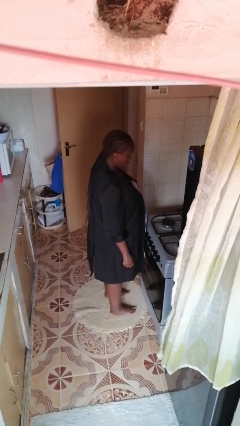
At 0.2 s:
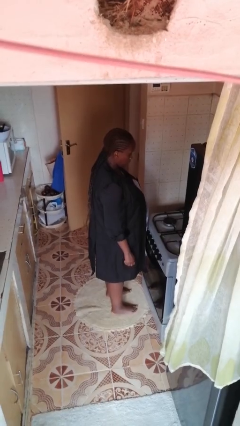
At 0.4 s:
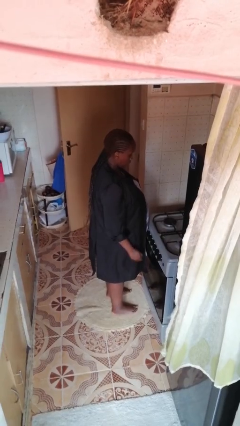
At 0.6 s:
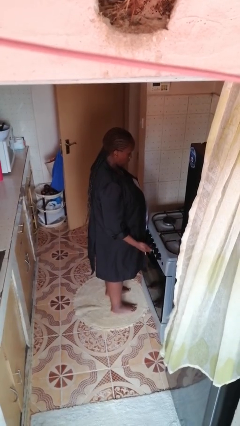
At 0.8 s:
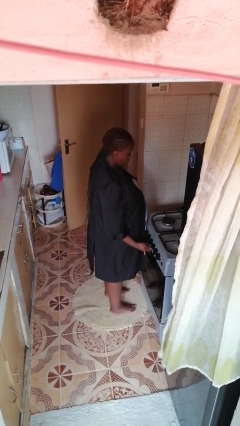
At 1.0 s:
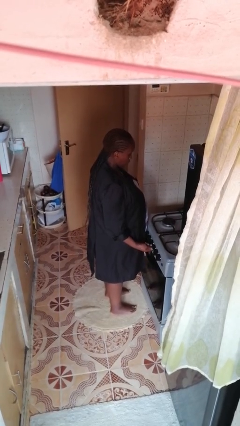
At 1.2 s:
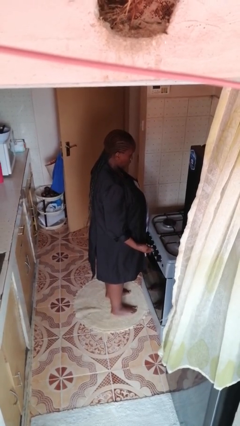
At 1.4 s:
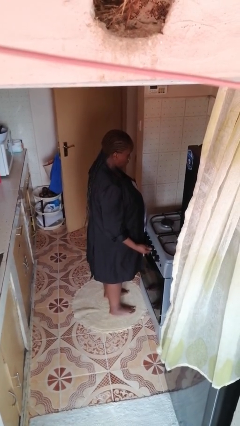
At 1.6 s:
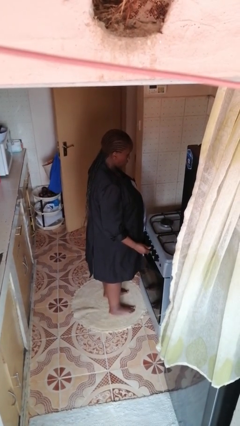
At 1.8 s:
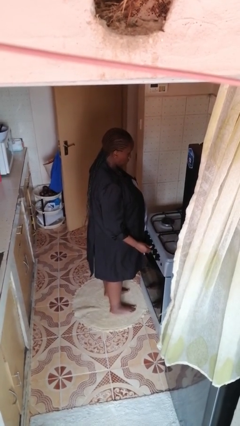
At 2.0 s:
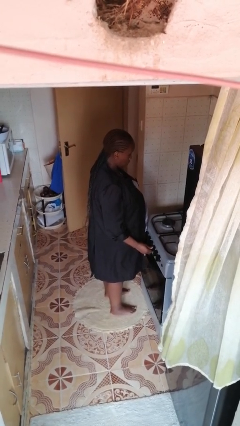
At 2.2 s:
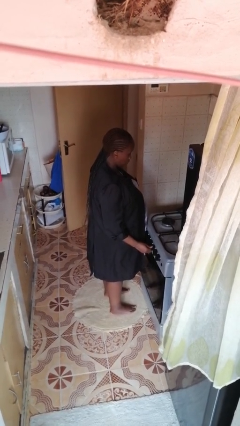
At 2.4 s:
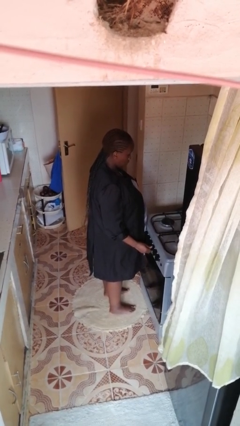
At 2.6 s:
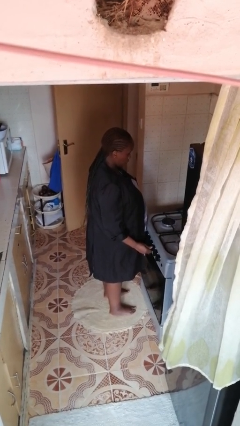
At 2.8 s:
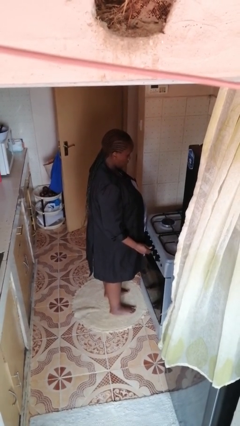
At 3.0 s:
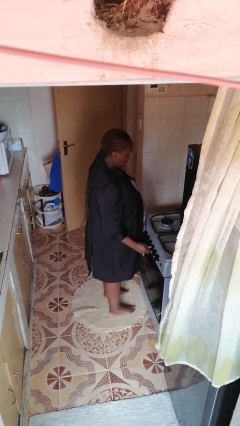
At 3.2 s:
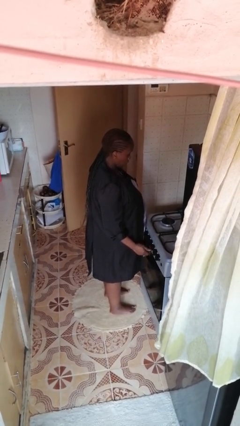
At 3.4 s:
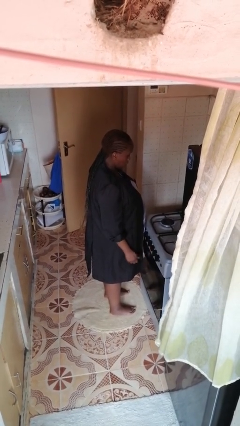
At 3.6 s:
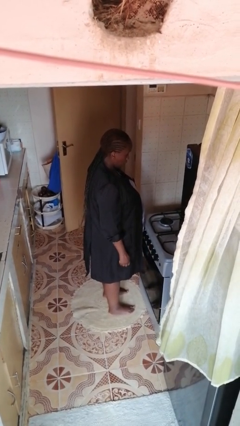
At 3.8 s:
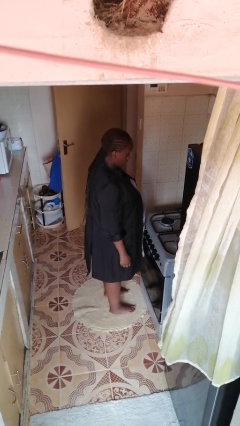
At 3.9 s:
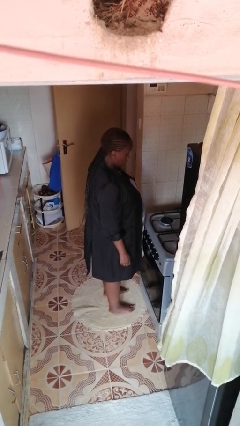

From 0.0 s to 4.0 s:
person turns on stovetop

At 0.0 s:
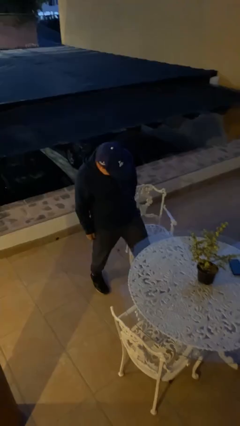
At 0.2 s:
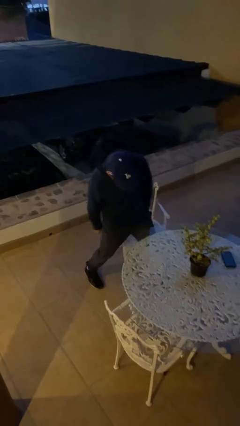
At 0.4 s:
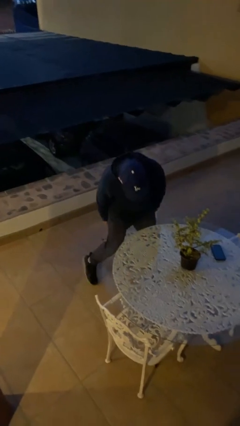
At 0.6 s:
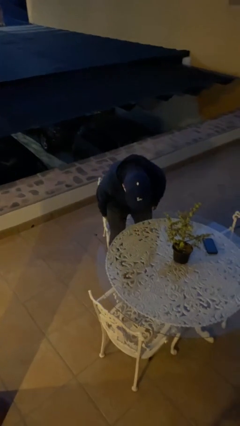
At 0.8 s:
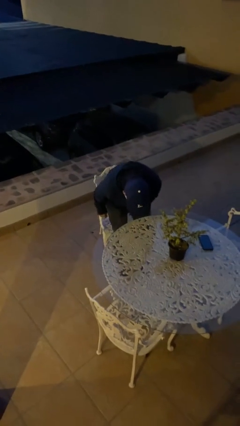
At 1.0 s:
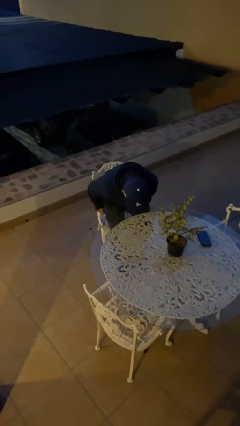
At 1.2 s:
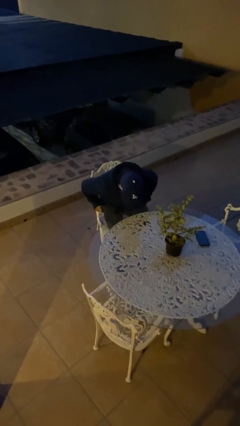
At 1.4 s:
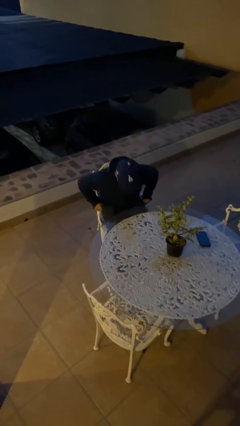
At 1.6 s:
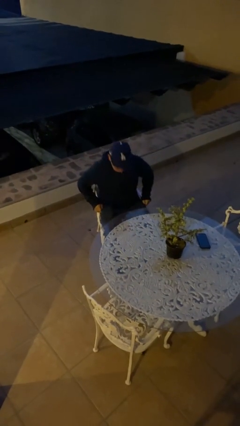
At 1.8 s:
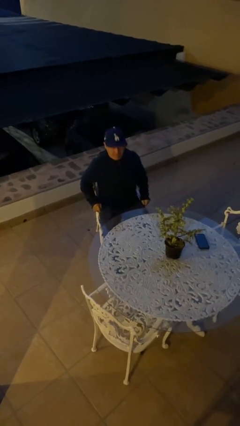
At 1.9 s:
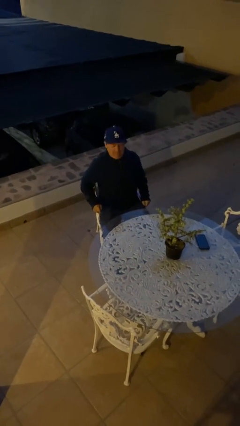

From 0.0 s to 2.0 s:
person sits down

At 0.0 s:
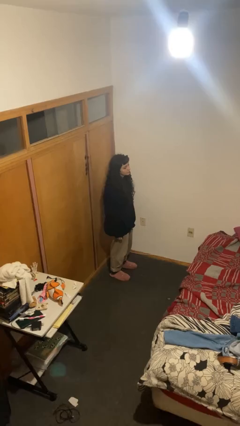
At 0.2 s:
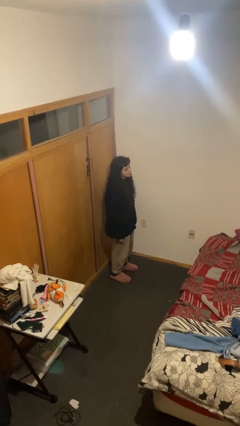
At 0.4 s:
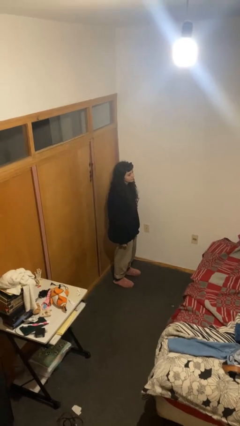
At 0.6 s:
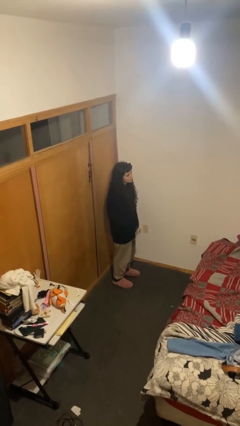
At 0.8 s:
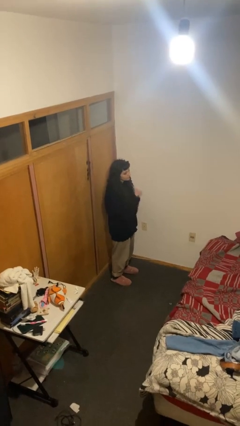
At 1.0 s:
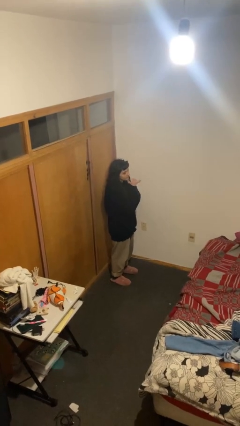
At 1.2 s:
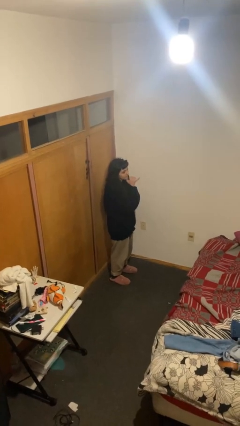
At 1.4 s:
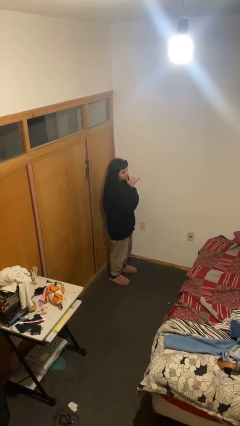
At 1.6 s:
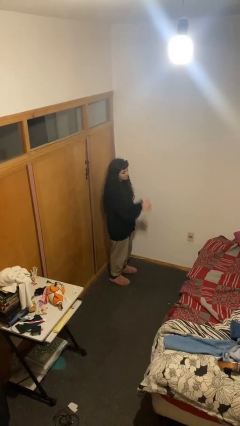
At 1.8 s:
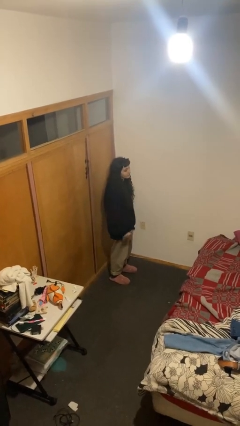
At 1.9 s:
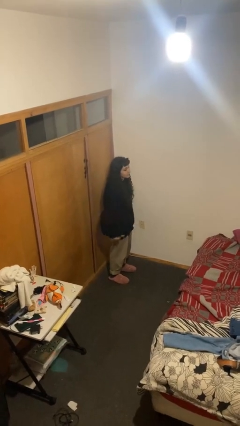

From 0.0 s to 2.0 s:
person gestures hang loose

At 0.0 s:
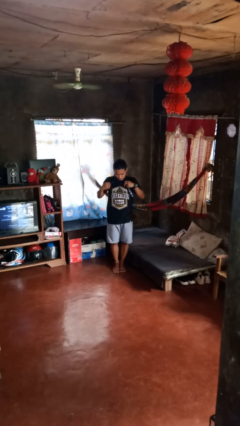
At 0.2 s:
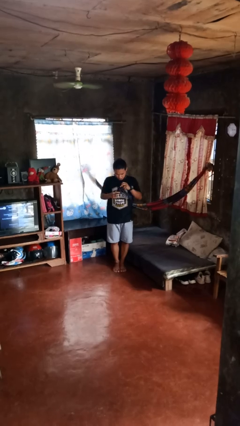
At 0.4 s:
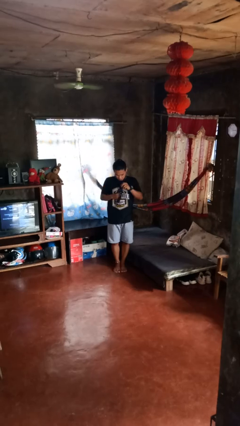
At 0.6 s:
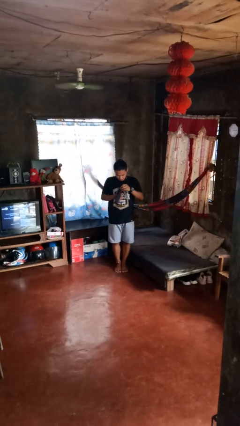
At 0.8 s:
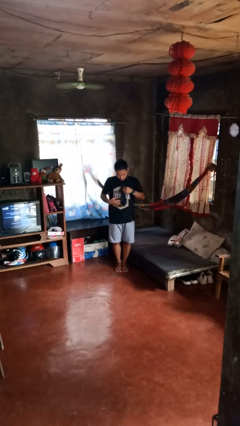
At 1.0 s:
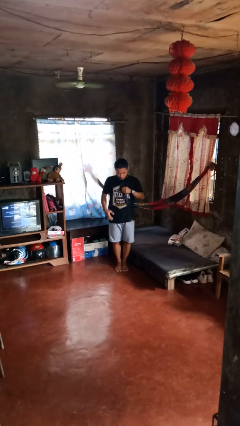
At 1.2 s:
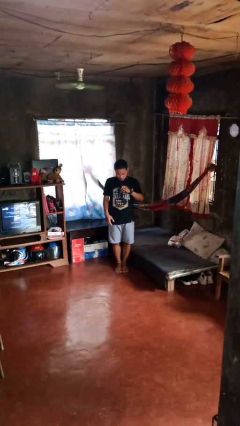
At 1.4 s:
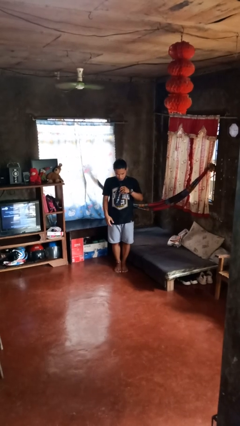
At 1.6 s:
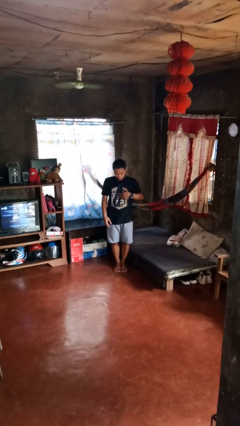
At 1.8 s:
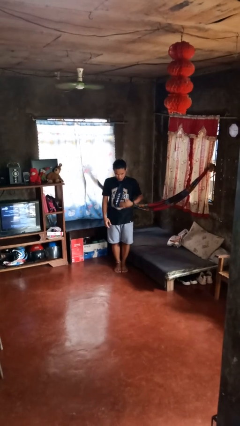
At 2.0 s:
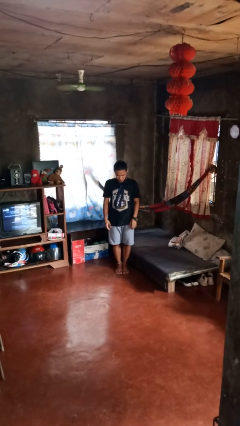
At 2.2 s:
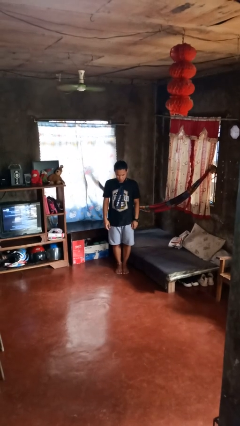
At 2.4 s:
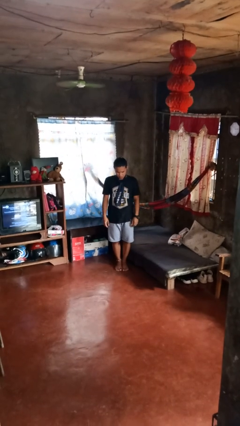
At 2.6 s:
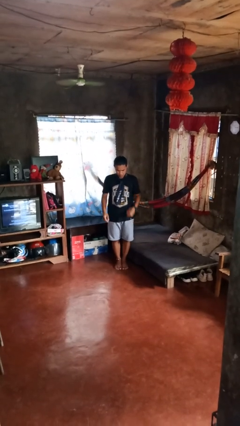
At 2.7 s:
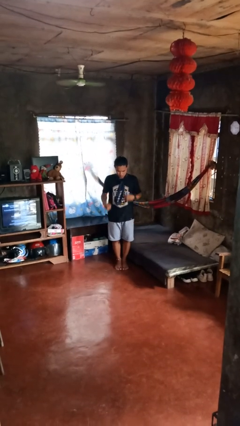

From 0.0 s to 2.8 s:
person dries hair with hairdryer

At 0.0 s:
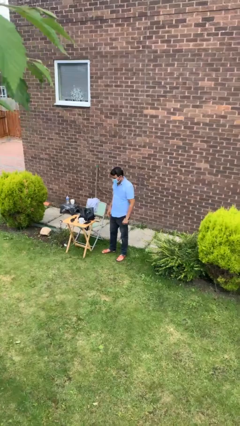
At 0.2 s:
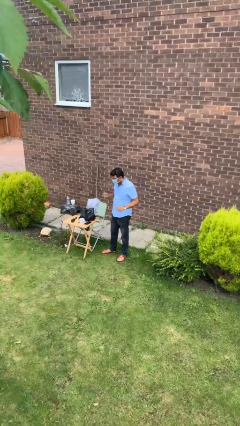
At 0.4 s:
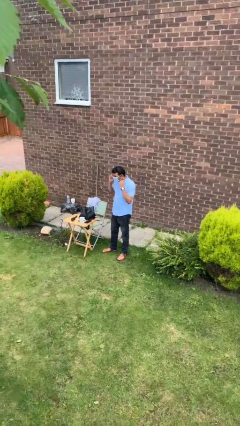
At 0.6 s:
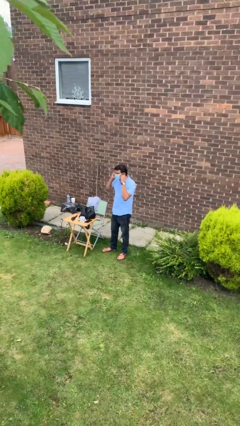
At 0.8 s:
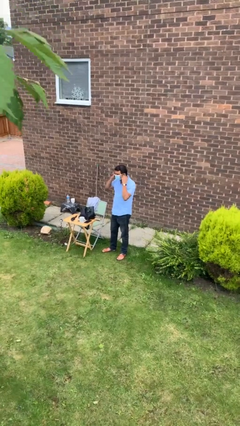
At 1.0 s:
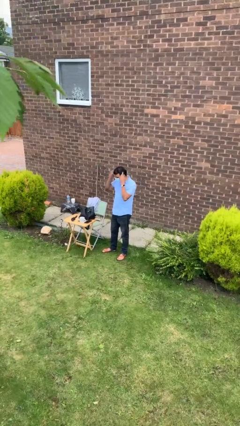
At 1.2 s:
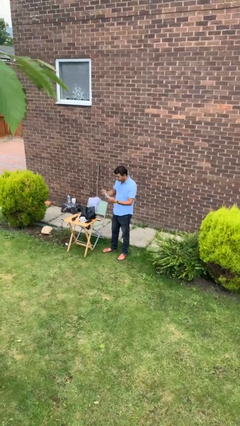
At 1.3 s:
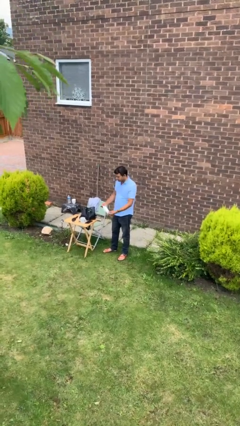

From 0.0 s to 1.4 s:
person takes off facemask

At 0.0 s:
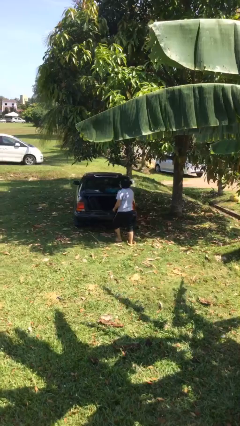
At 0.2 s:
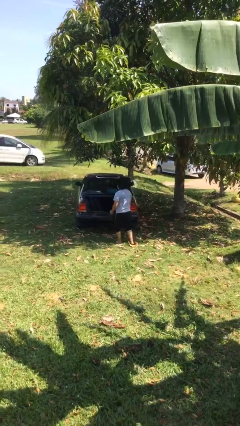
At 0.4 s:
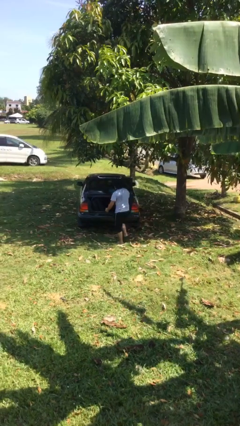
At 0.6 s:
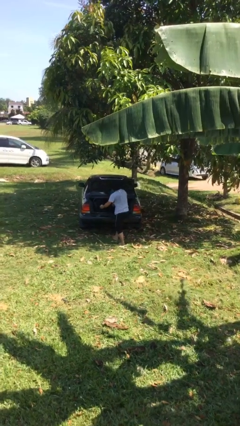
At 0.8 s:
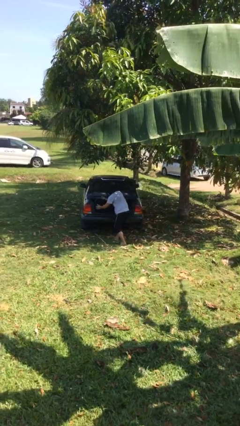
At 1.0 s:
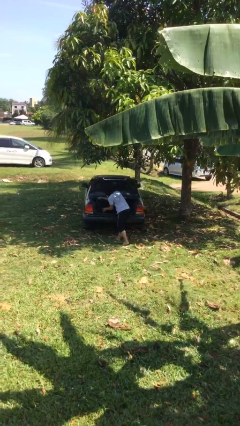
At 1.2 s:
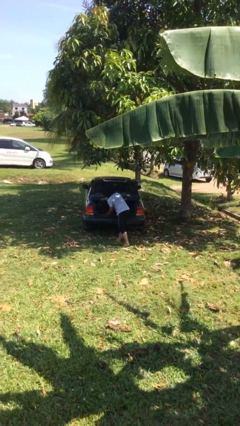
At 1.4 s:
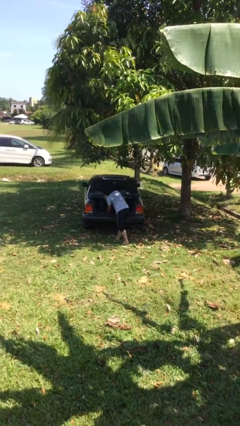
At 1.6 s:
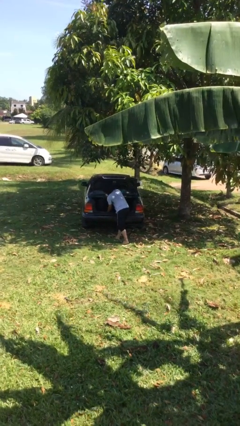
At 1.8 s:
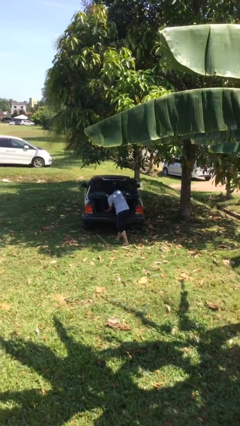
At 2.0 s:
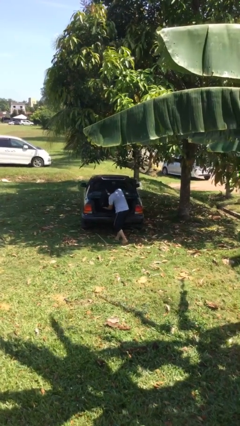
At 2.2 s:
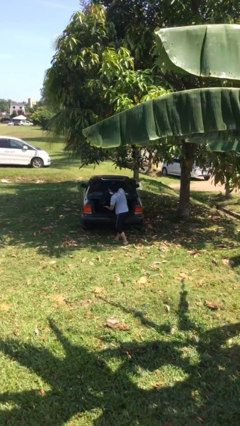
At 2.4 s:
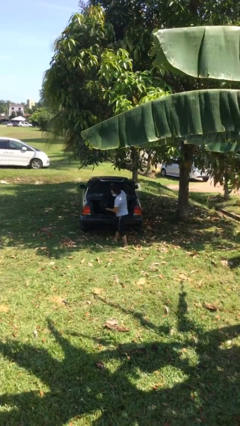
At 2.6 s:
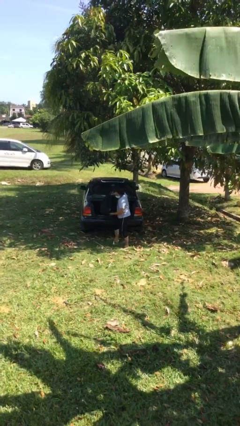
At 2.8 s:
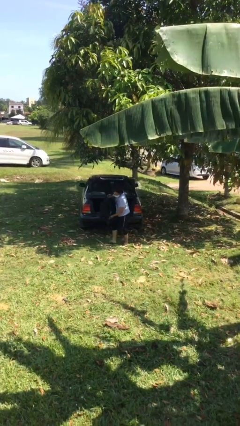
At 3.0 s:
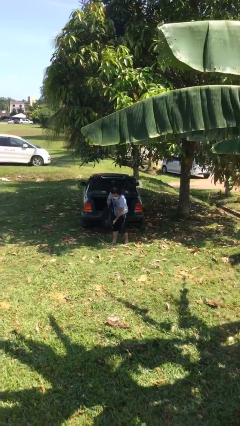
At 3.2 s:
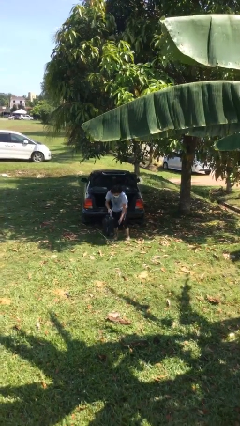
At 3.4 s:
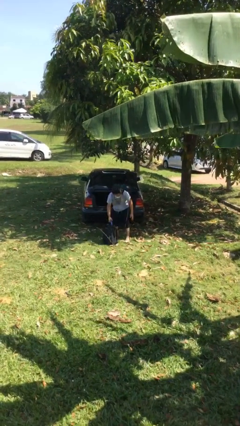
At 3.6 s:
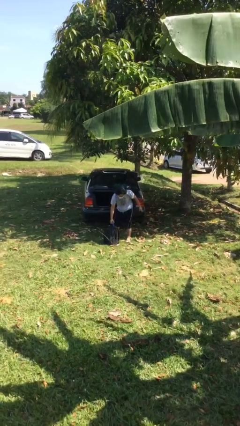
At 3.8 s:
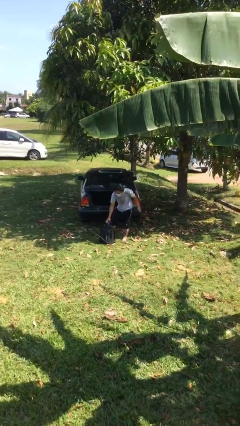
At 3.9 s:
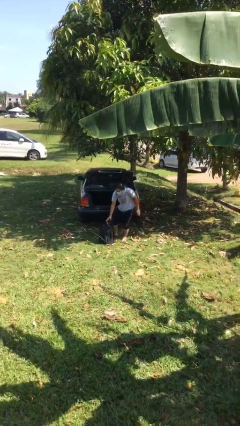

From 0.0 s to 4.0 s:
person unloads car

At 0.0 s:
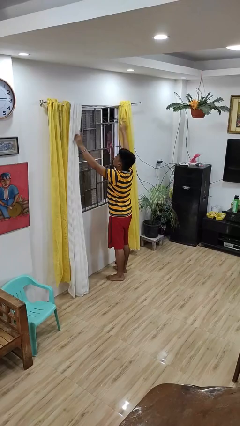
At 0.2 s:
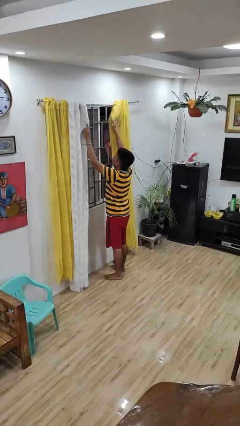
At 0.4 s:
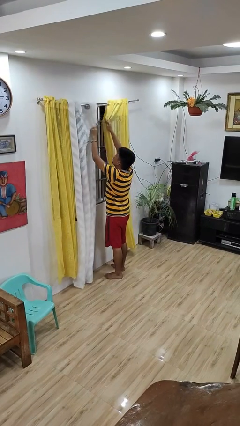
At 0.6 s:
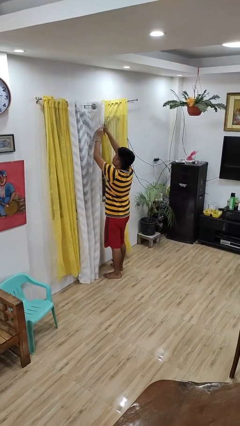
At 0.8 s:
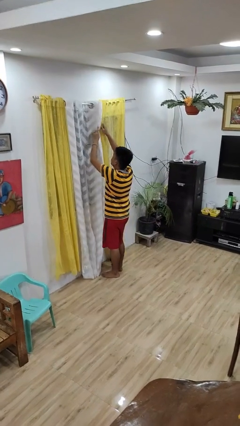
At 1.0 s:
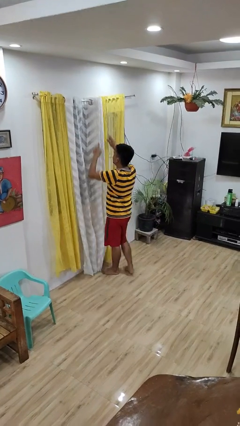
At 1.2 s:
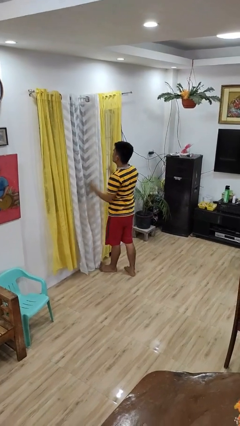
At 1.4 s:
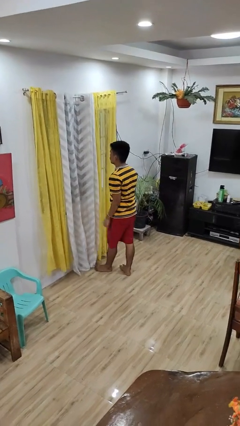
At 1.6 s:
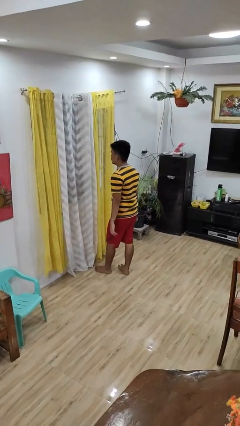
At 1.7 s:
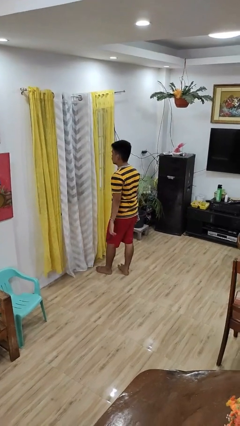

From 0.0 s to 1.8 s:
person closes curtains
